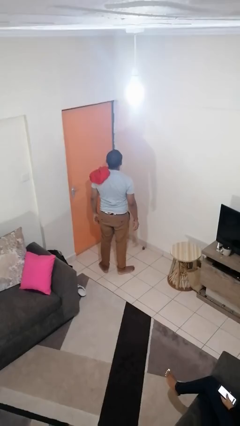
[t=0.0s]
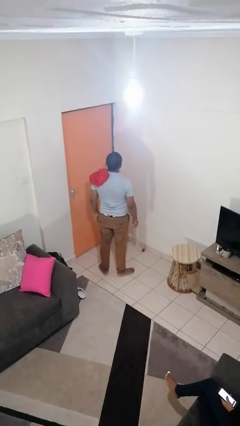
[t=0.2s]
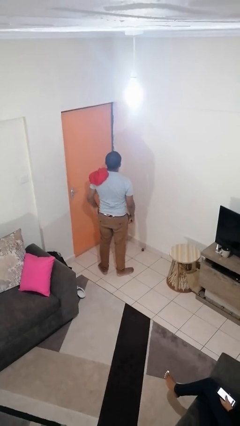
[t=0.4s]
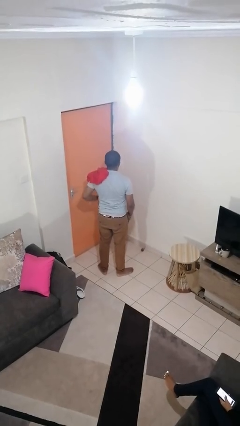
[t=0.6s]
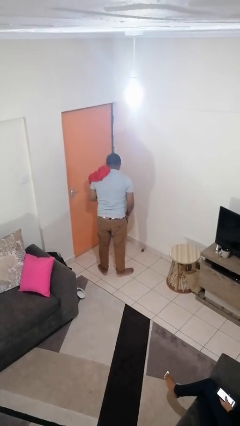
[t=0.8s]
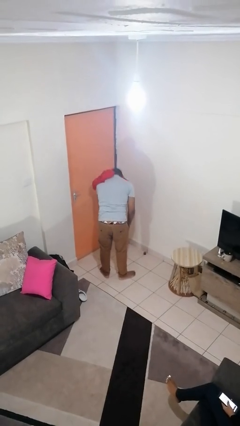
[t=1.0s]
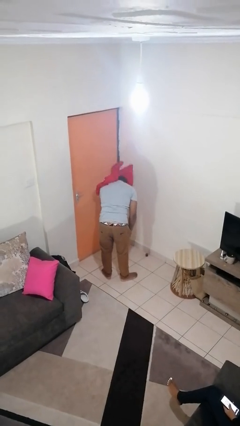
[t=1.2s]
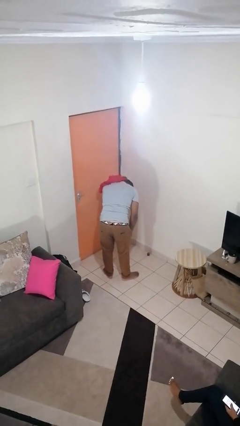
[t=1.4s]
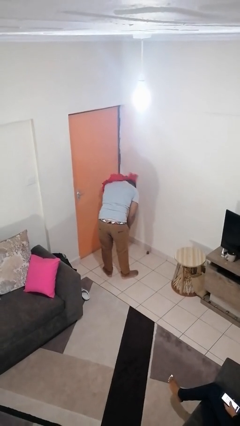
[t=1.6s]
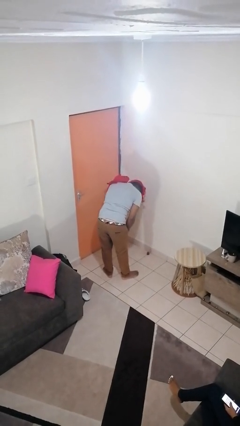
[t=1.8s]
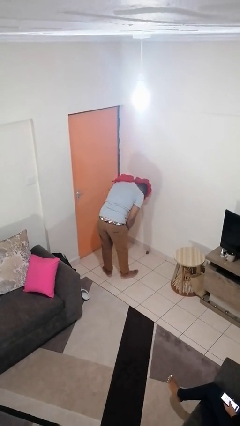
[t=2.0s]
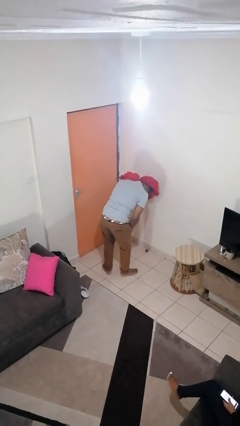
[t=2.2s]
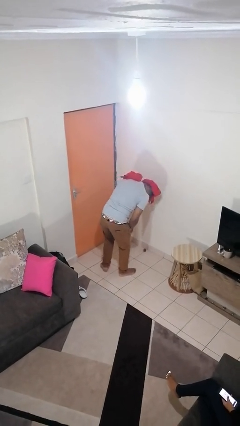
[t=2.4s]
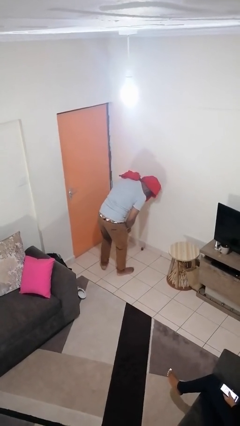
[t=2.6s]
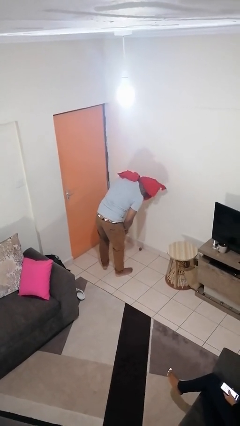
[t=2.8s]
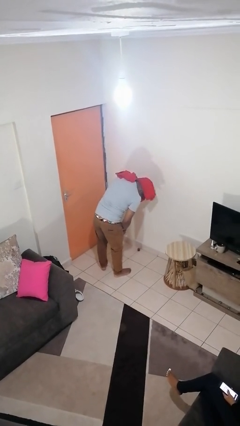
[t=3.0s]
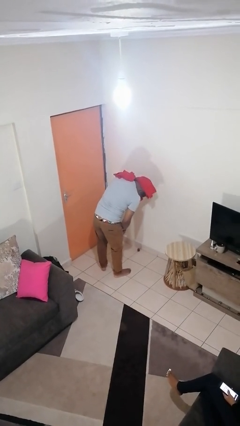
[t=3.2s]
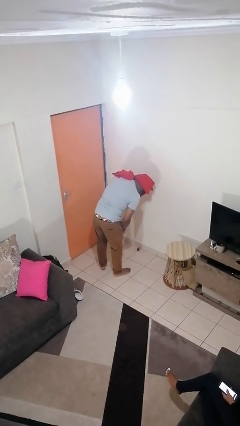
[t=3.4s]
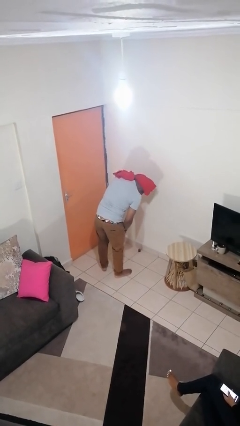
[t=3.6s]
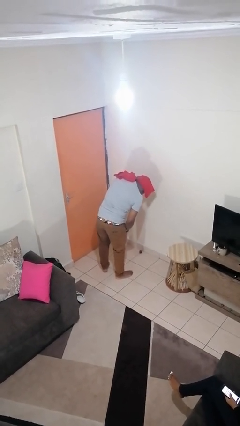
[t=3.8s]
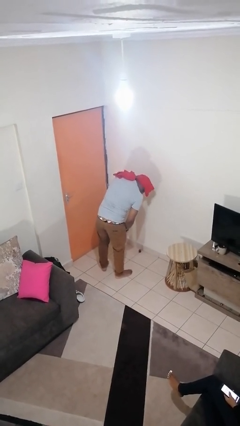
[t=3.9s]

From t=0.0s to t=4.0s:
person dries hair with towel

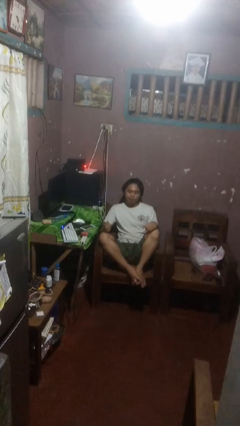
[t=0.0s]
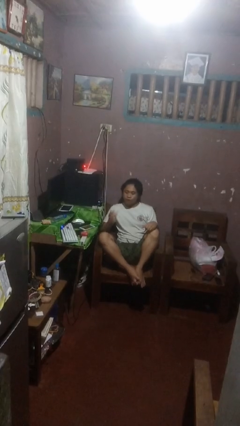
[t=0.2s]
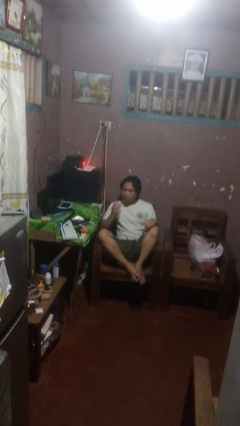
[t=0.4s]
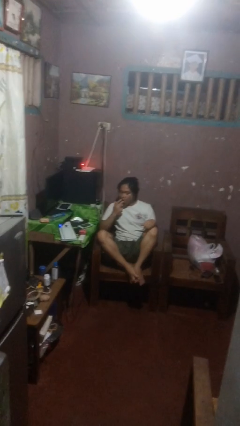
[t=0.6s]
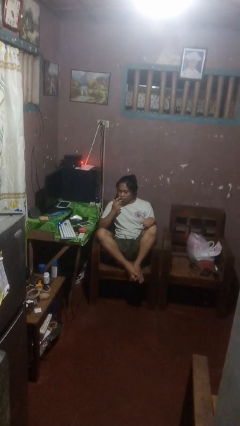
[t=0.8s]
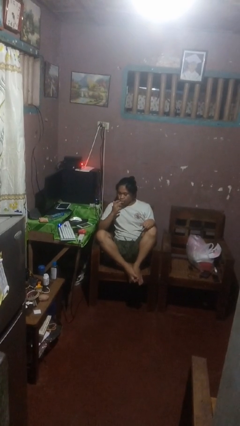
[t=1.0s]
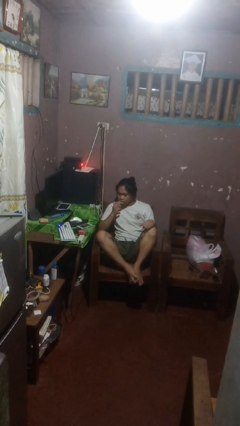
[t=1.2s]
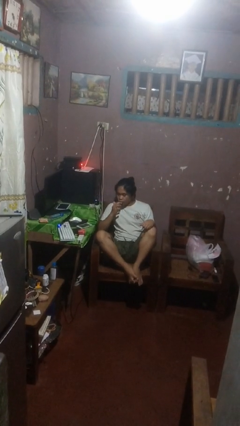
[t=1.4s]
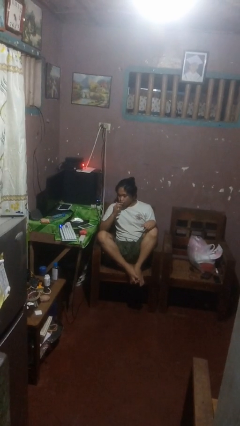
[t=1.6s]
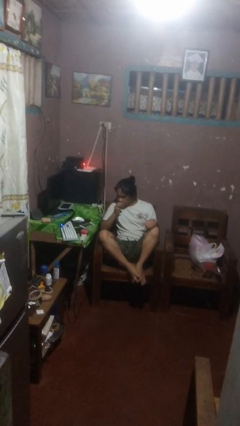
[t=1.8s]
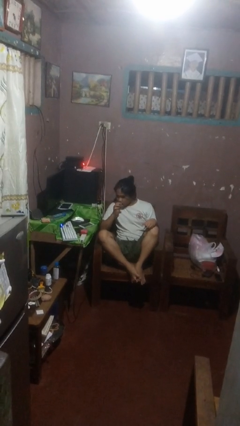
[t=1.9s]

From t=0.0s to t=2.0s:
person licks fingers

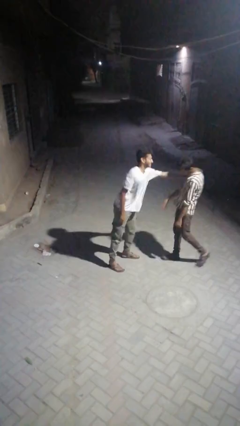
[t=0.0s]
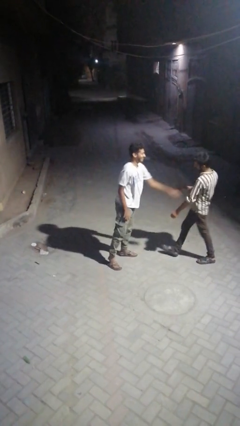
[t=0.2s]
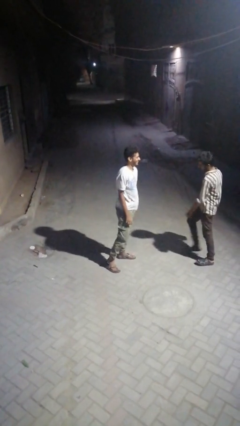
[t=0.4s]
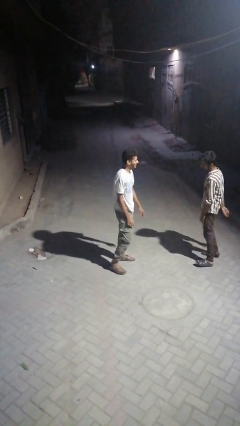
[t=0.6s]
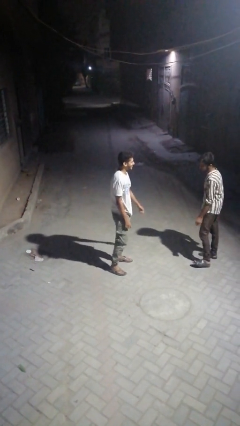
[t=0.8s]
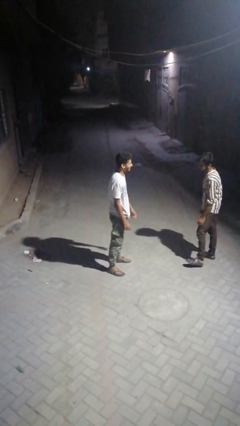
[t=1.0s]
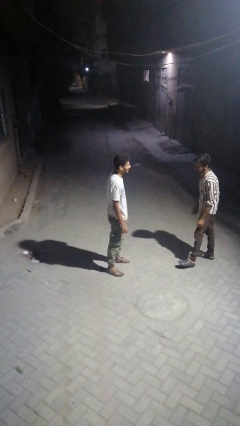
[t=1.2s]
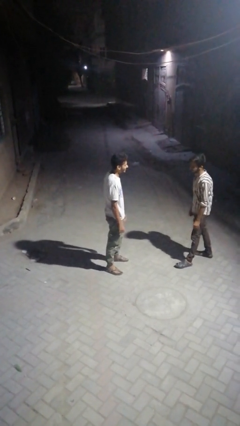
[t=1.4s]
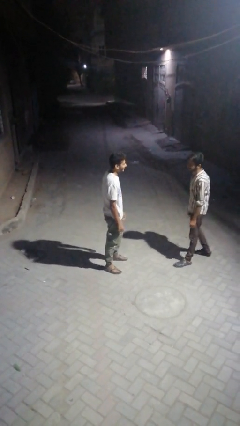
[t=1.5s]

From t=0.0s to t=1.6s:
person shoves person

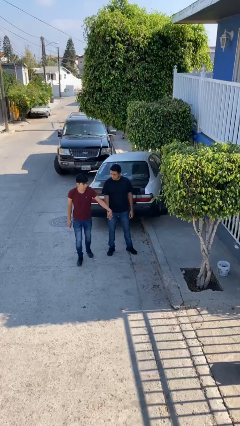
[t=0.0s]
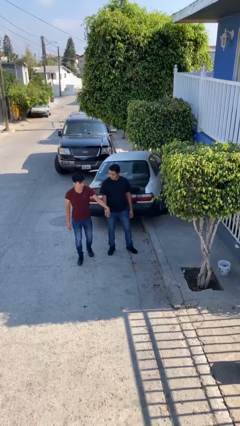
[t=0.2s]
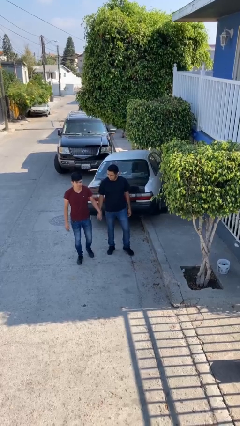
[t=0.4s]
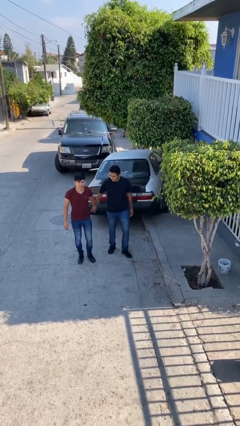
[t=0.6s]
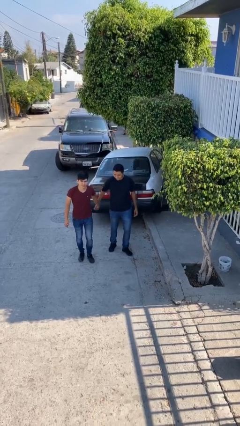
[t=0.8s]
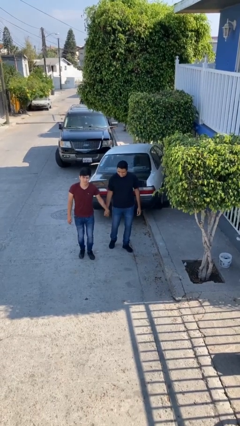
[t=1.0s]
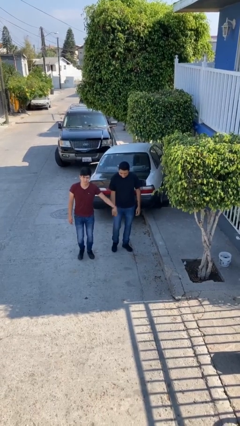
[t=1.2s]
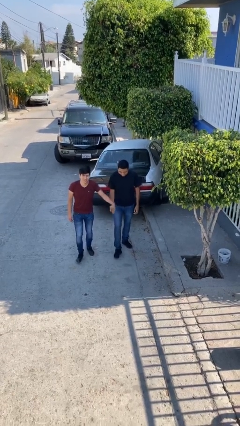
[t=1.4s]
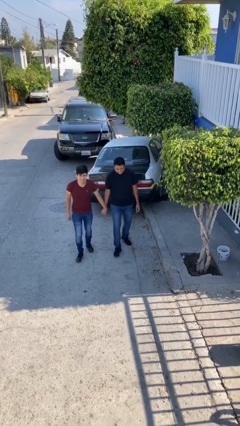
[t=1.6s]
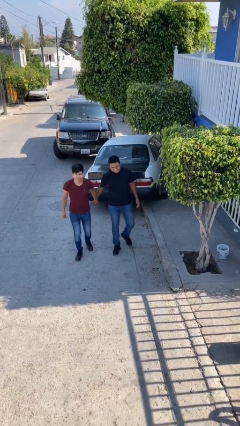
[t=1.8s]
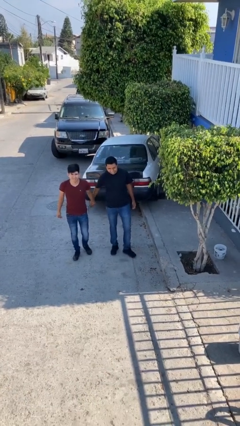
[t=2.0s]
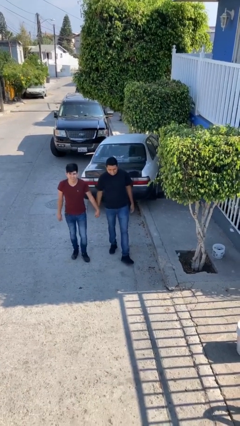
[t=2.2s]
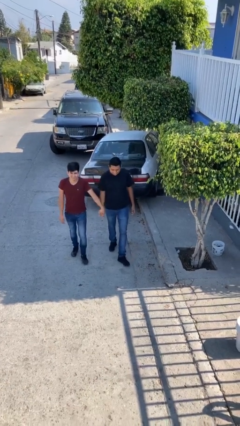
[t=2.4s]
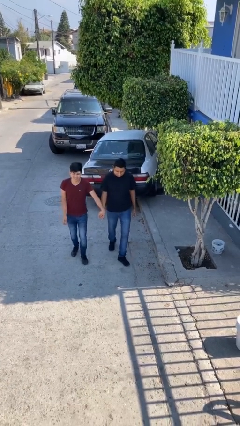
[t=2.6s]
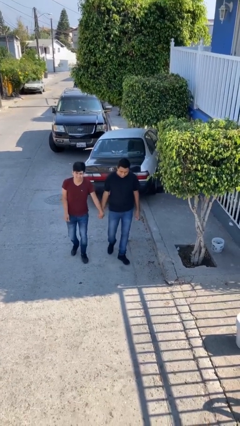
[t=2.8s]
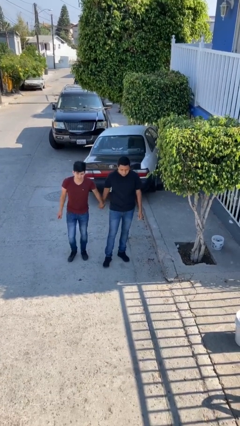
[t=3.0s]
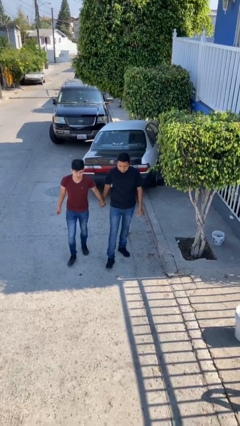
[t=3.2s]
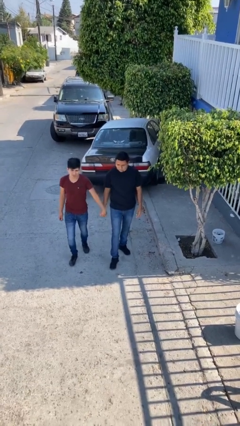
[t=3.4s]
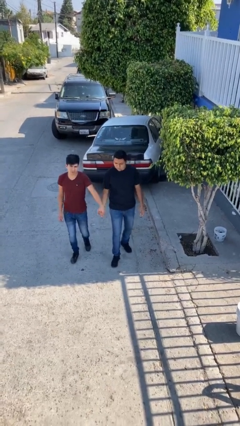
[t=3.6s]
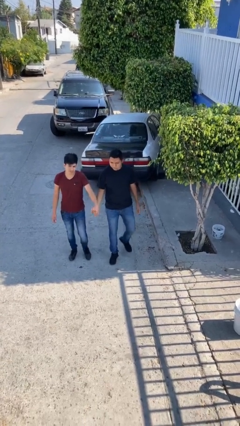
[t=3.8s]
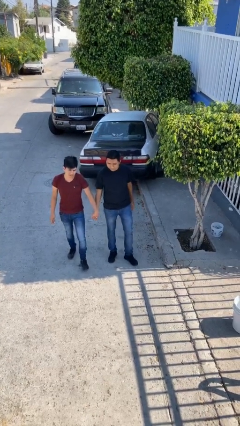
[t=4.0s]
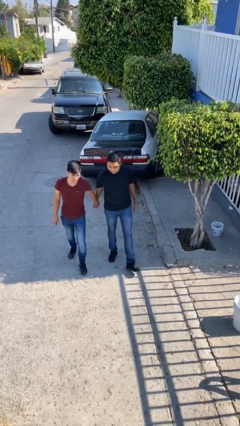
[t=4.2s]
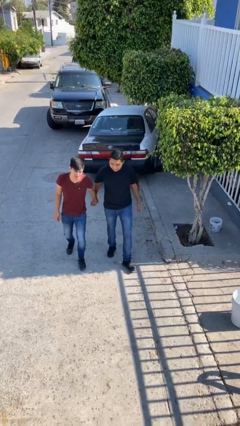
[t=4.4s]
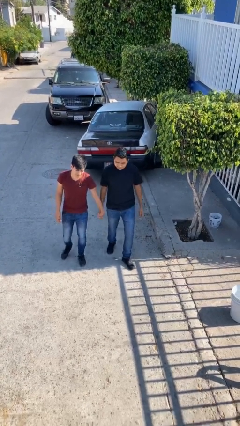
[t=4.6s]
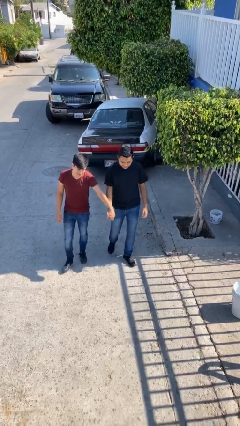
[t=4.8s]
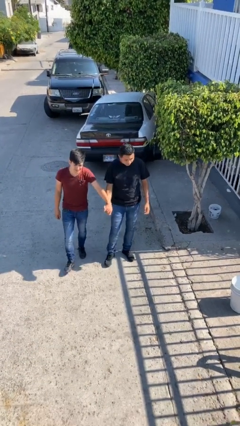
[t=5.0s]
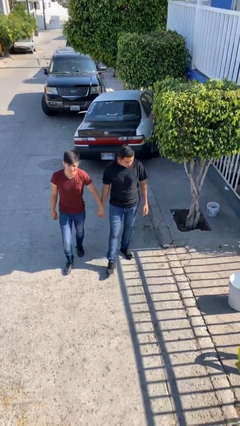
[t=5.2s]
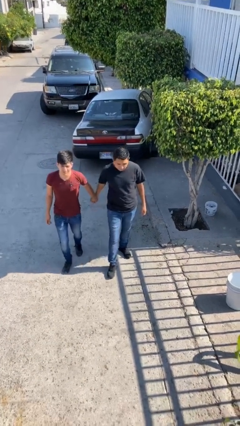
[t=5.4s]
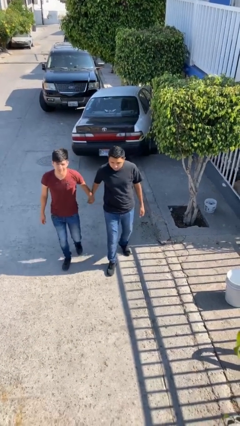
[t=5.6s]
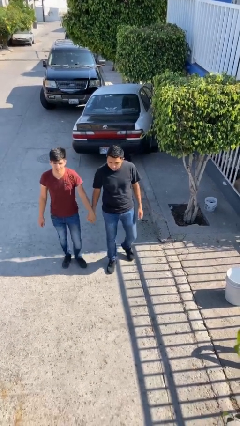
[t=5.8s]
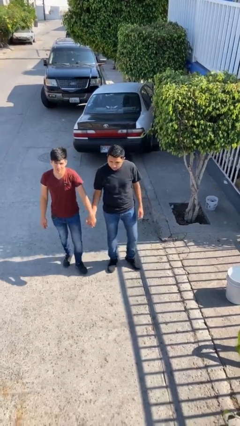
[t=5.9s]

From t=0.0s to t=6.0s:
person holds hand

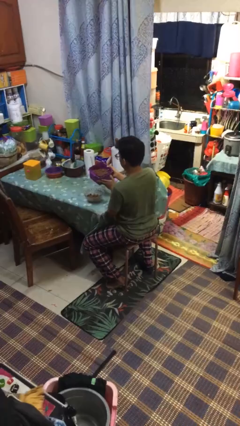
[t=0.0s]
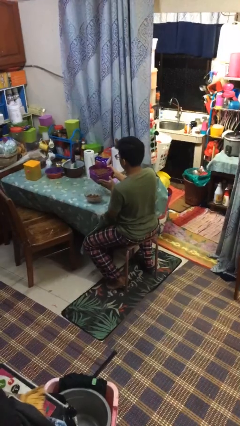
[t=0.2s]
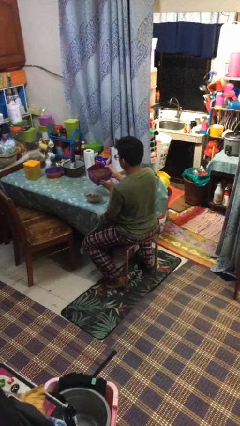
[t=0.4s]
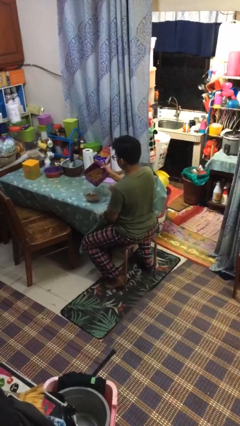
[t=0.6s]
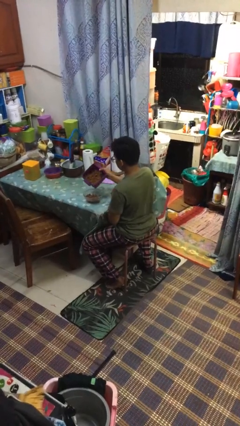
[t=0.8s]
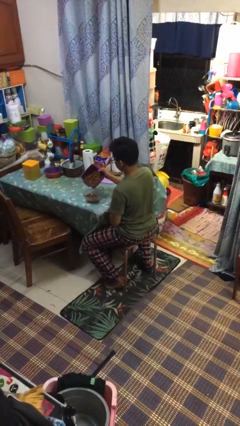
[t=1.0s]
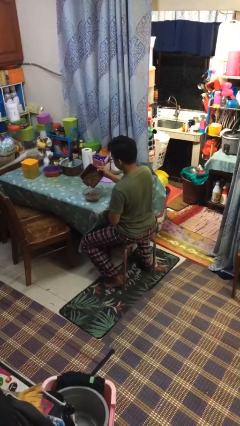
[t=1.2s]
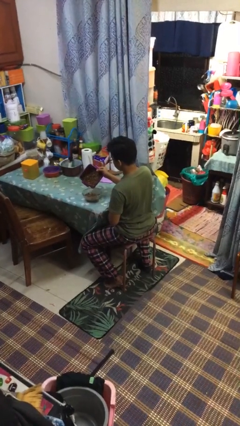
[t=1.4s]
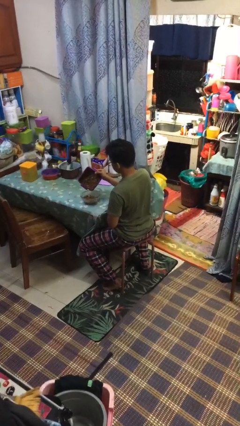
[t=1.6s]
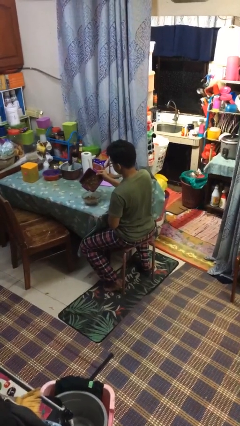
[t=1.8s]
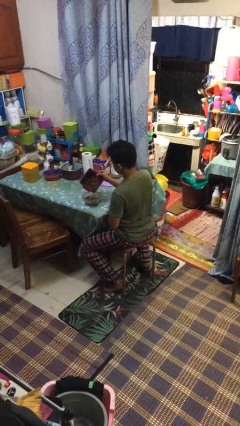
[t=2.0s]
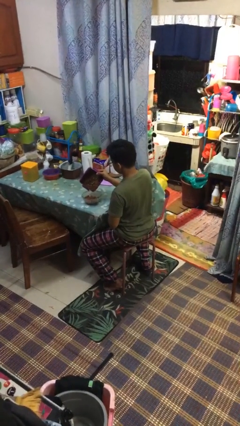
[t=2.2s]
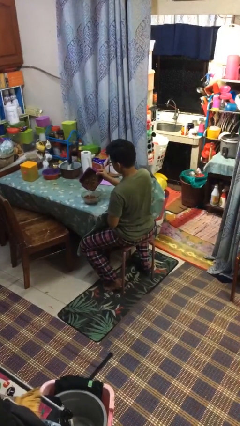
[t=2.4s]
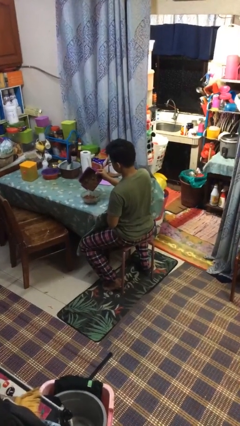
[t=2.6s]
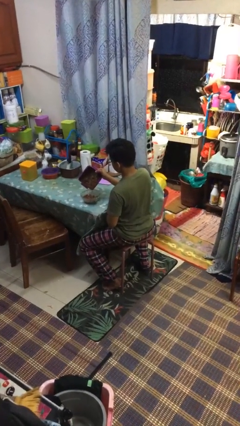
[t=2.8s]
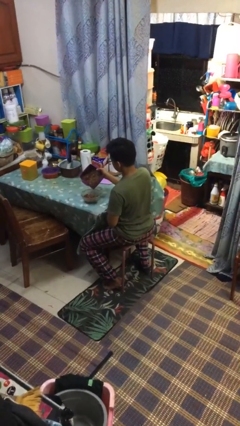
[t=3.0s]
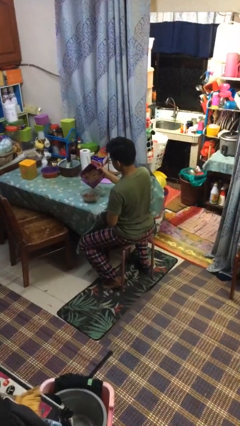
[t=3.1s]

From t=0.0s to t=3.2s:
person pours into bowl

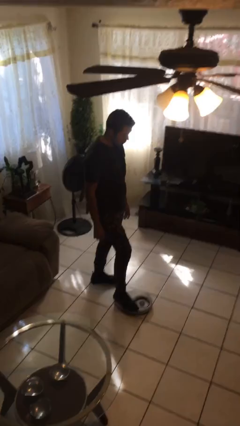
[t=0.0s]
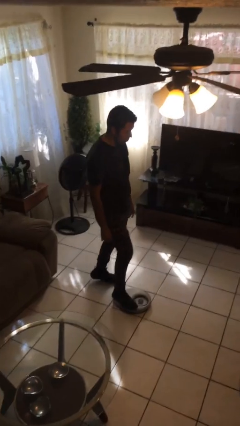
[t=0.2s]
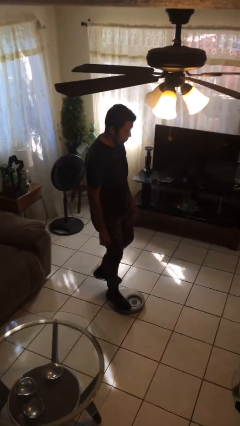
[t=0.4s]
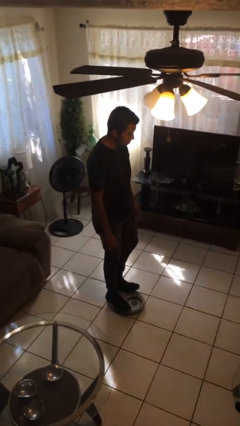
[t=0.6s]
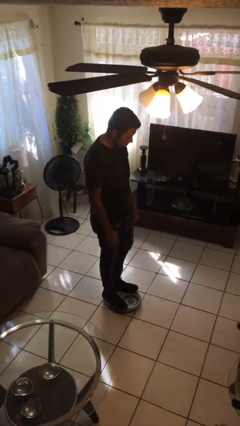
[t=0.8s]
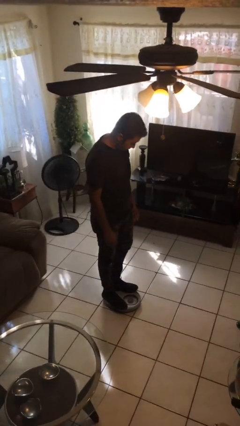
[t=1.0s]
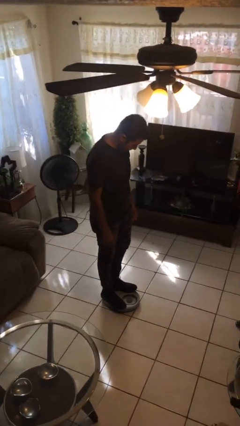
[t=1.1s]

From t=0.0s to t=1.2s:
person uses bodyweight scale
